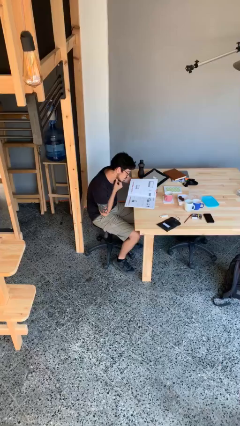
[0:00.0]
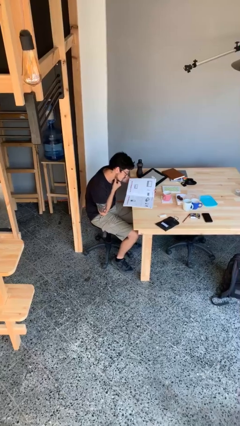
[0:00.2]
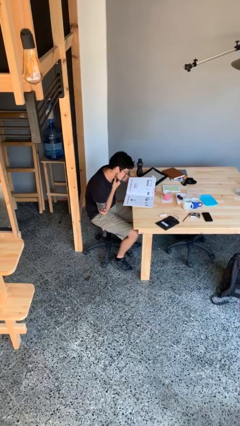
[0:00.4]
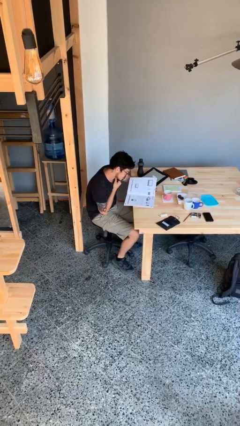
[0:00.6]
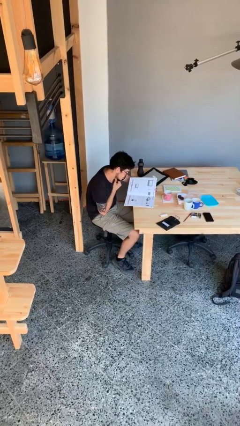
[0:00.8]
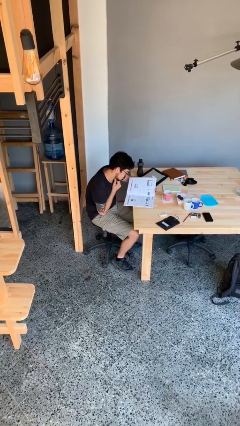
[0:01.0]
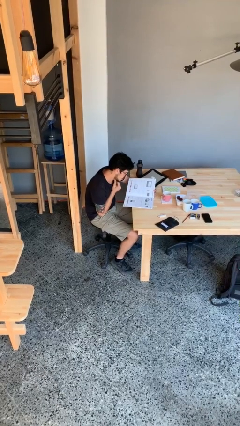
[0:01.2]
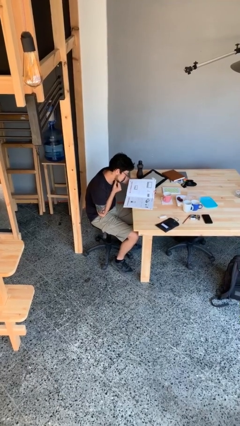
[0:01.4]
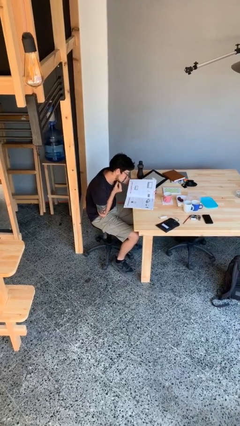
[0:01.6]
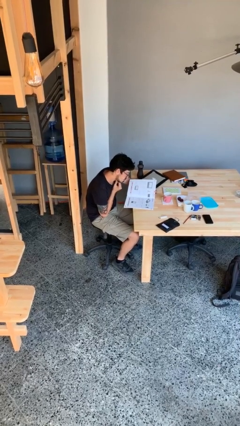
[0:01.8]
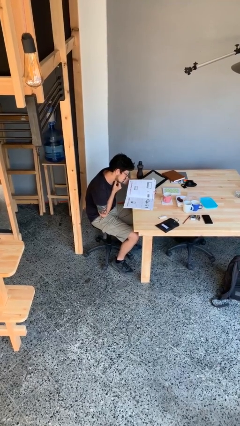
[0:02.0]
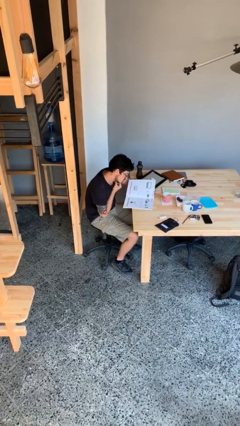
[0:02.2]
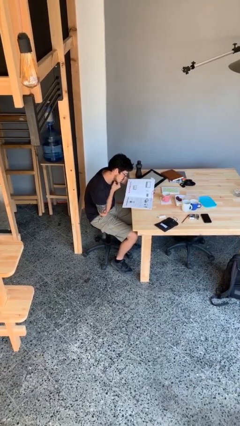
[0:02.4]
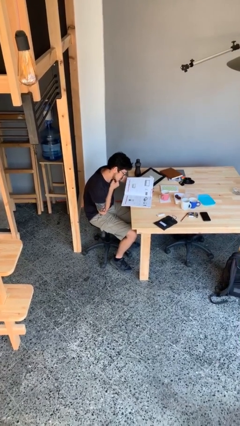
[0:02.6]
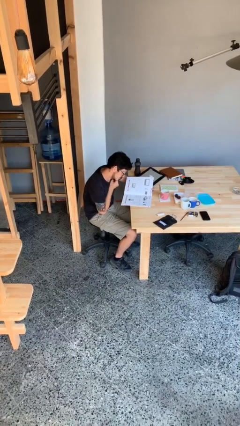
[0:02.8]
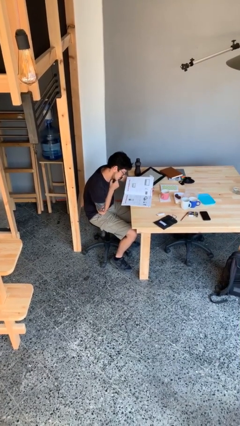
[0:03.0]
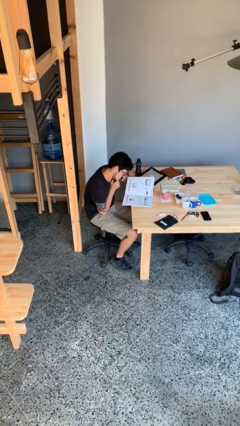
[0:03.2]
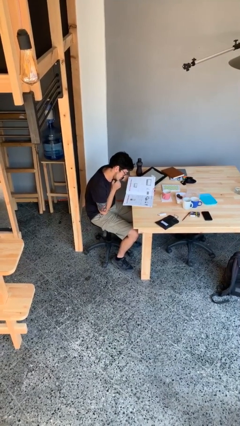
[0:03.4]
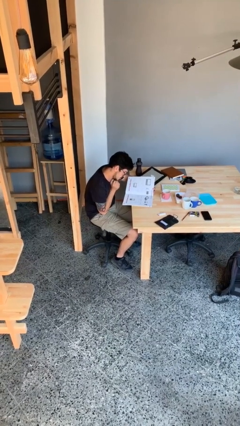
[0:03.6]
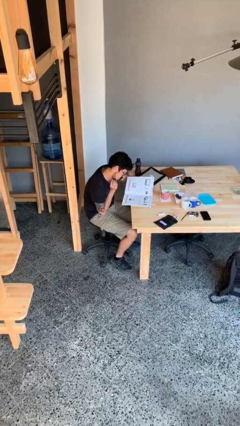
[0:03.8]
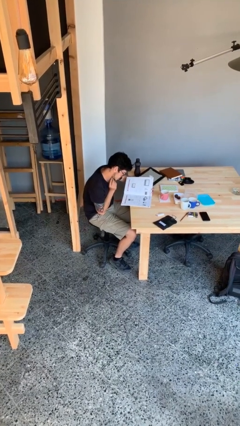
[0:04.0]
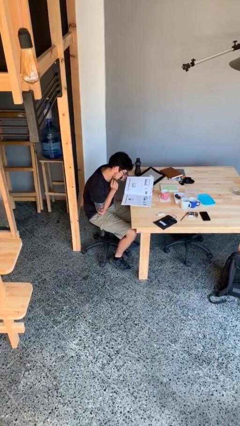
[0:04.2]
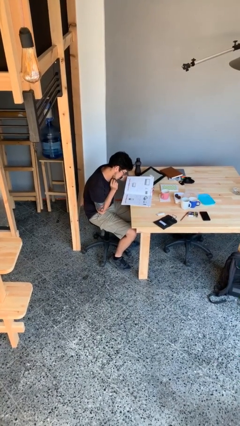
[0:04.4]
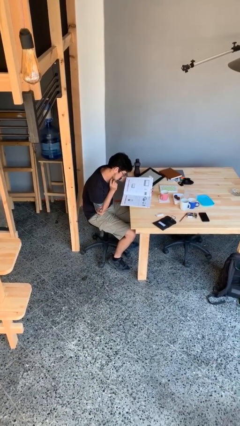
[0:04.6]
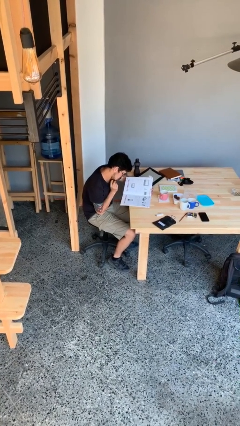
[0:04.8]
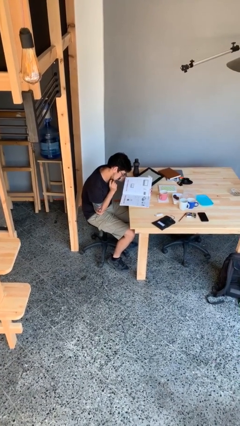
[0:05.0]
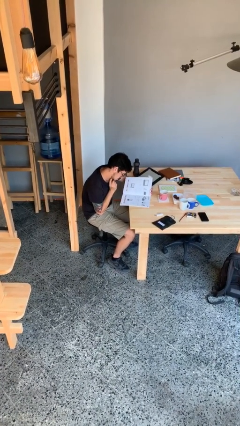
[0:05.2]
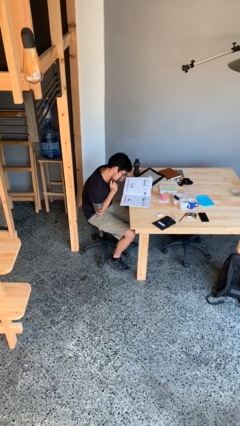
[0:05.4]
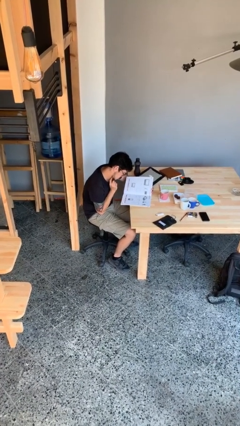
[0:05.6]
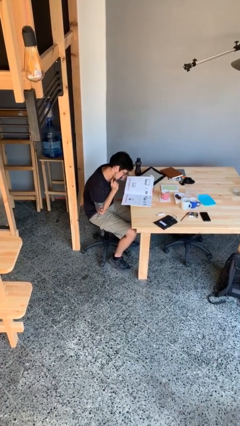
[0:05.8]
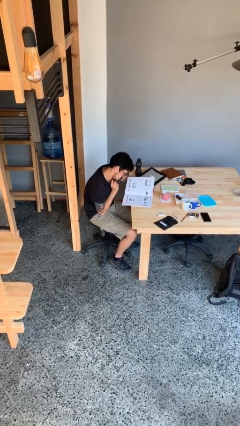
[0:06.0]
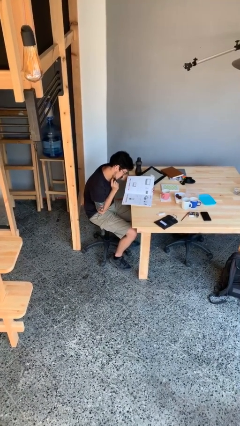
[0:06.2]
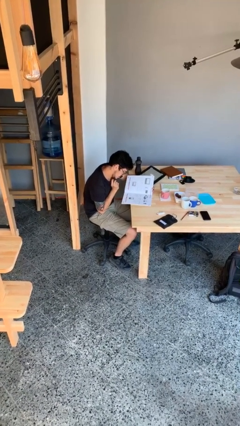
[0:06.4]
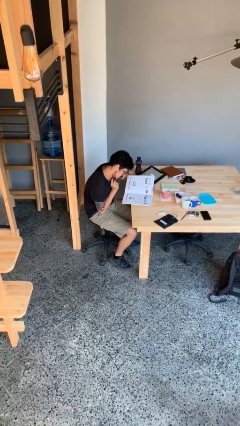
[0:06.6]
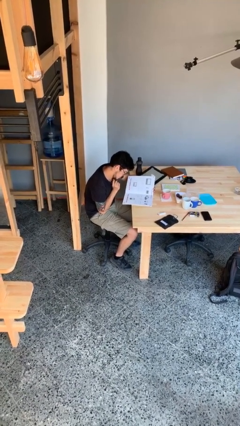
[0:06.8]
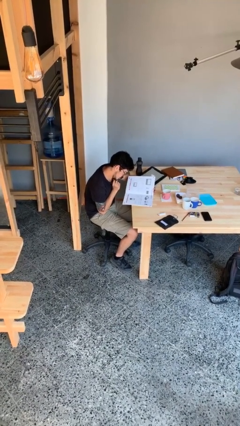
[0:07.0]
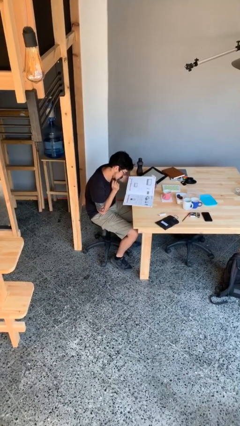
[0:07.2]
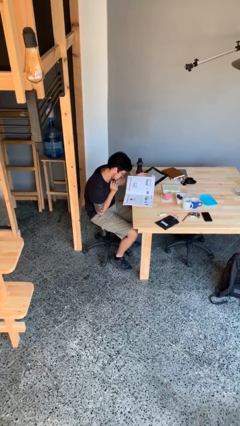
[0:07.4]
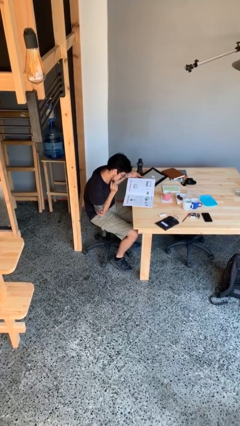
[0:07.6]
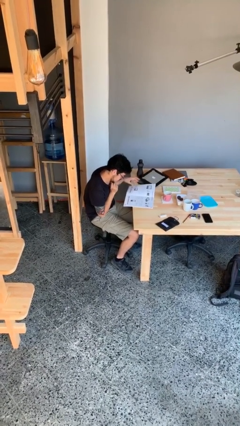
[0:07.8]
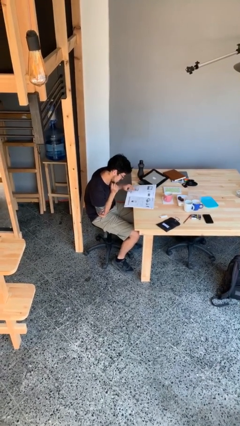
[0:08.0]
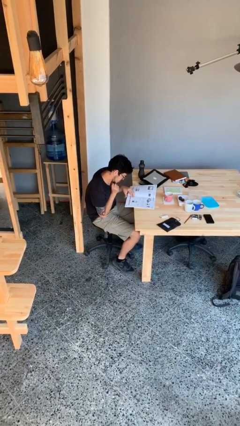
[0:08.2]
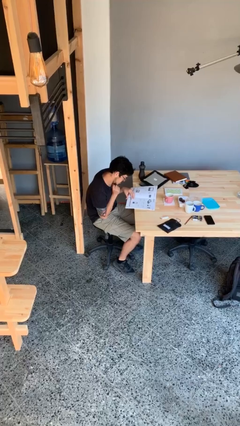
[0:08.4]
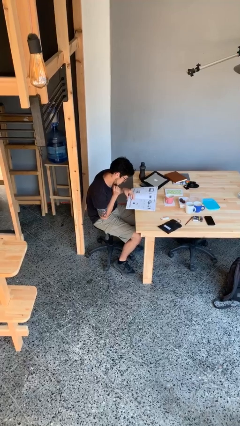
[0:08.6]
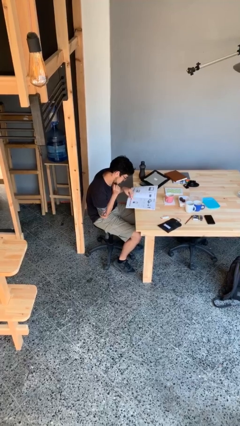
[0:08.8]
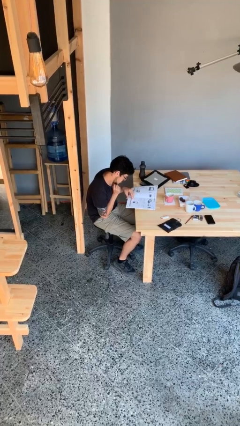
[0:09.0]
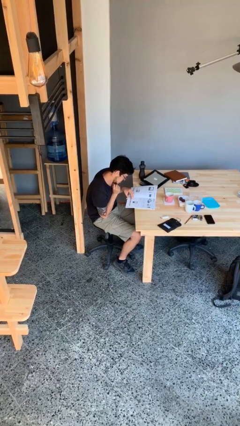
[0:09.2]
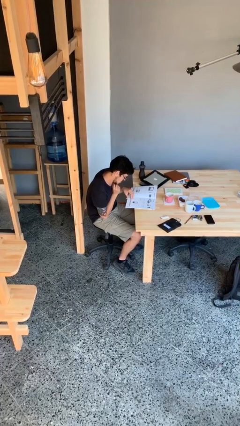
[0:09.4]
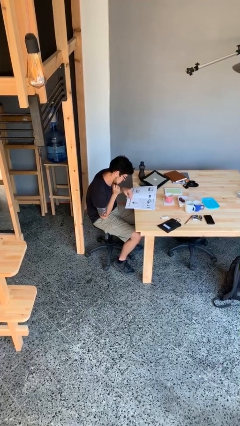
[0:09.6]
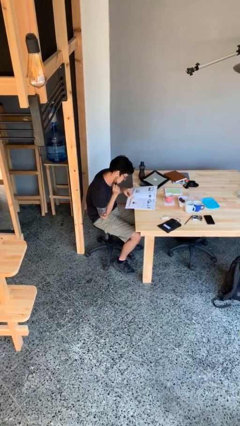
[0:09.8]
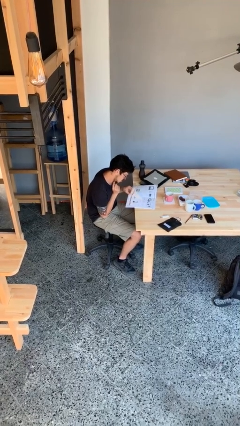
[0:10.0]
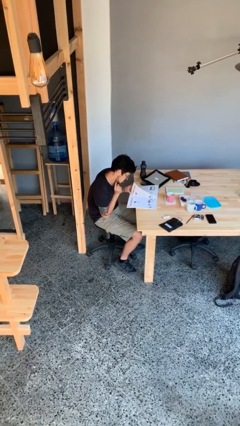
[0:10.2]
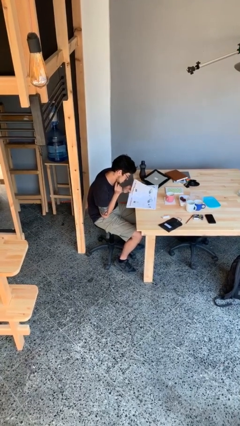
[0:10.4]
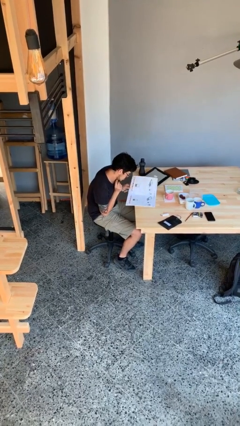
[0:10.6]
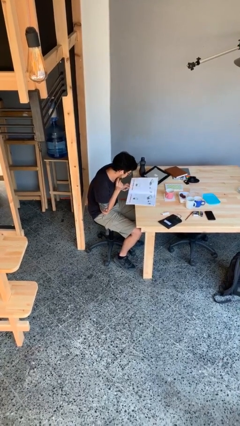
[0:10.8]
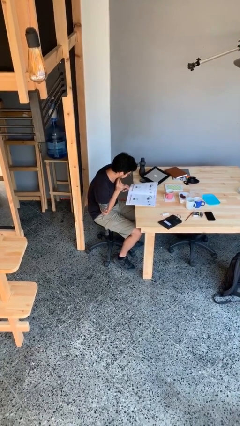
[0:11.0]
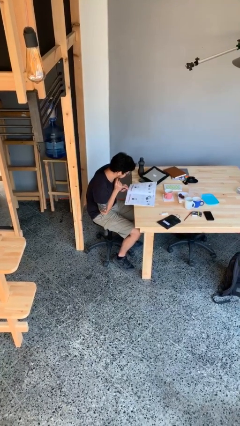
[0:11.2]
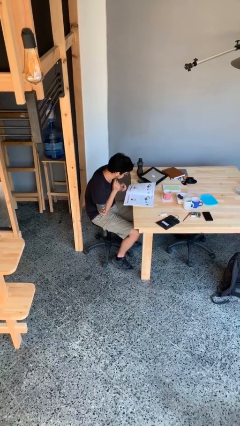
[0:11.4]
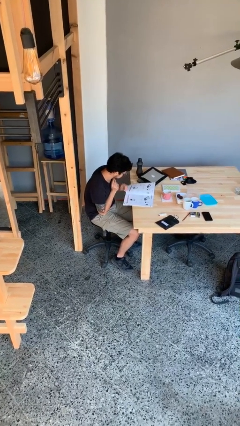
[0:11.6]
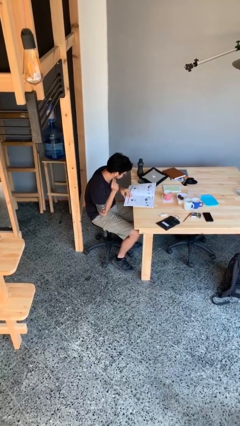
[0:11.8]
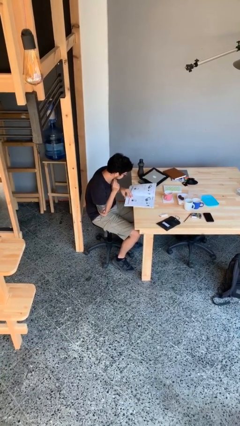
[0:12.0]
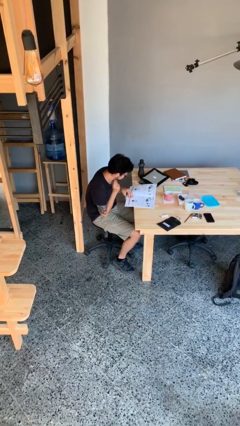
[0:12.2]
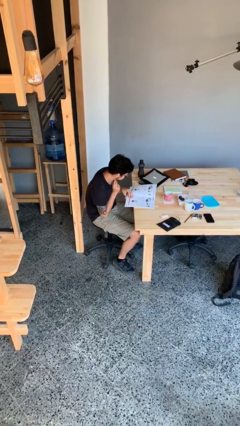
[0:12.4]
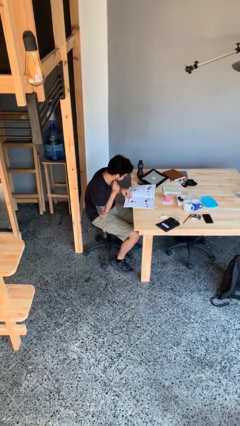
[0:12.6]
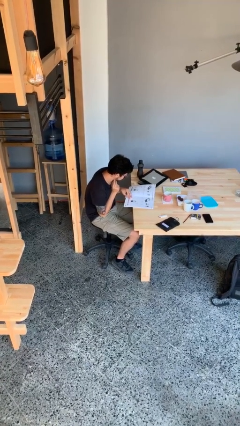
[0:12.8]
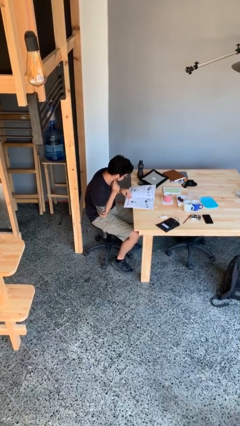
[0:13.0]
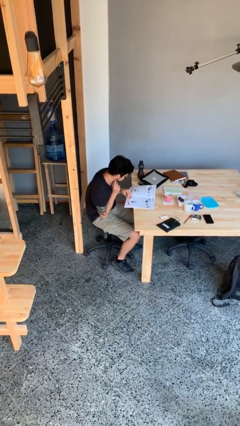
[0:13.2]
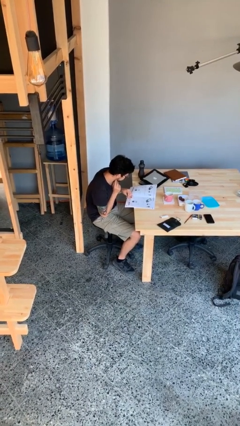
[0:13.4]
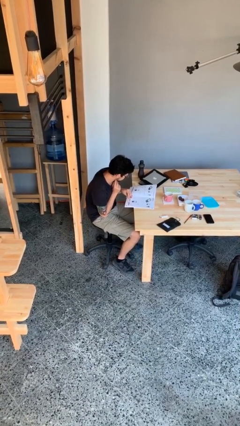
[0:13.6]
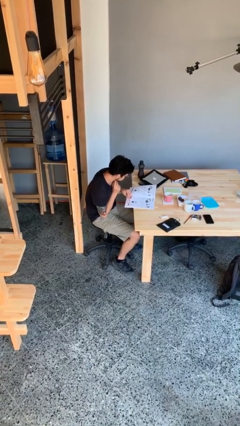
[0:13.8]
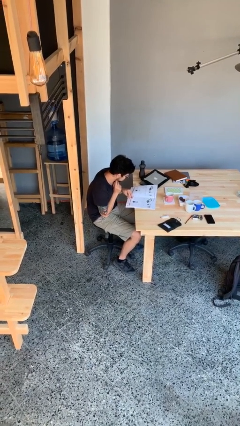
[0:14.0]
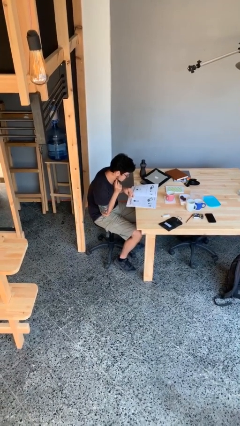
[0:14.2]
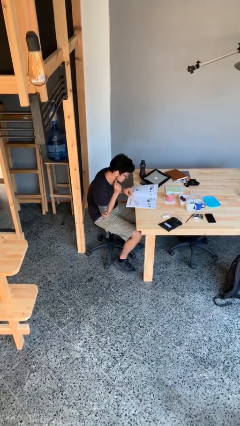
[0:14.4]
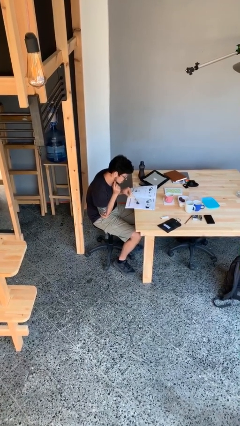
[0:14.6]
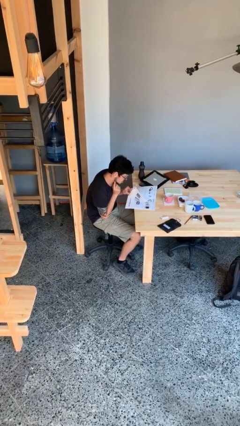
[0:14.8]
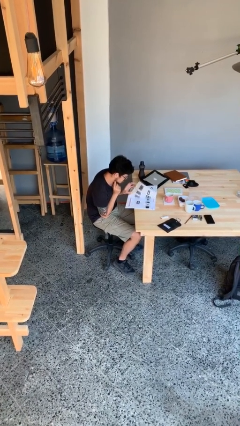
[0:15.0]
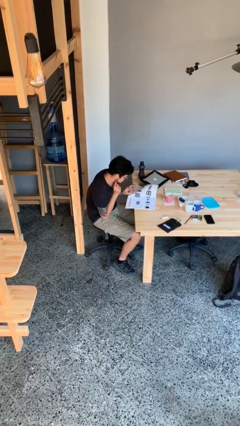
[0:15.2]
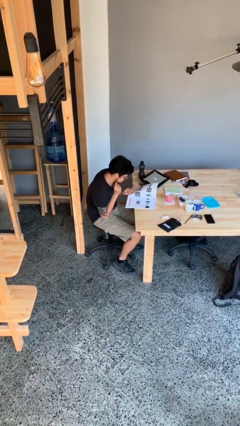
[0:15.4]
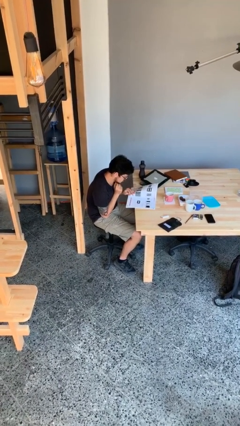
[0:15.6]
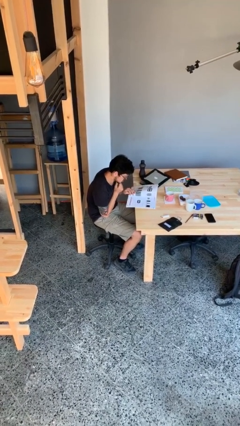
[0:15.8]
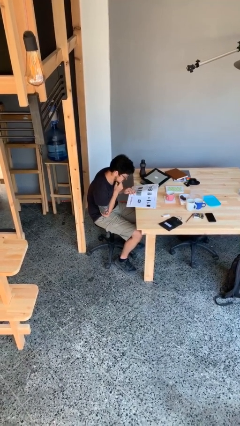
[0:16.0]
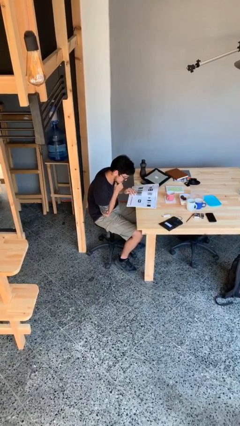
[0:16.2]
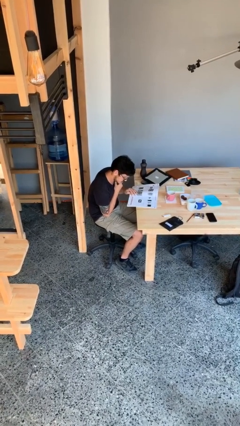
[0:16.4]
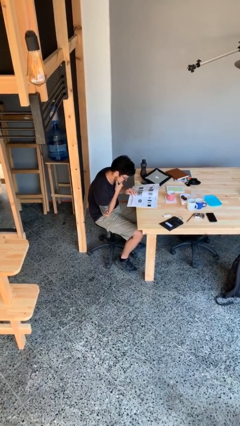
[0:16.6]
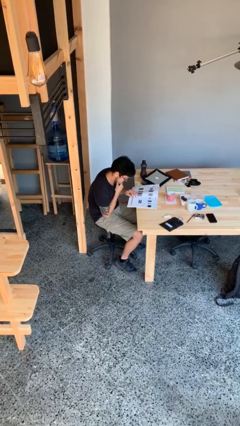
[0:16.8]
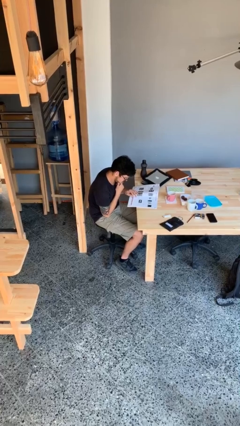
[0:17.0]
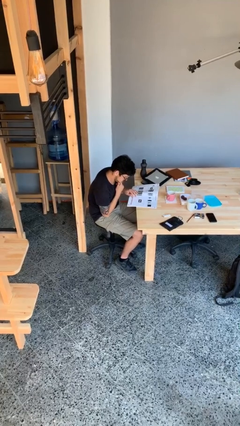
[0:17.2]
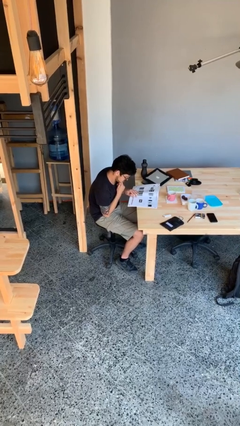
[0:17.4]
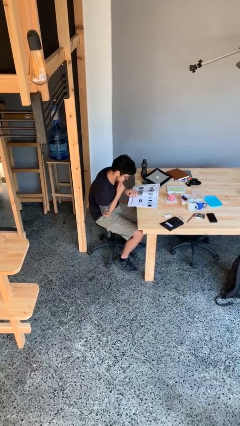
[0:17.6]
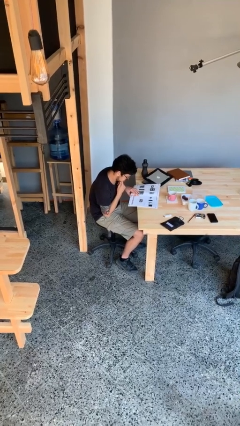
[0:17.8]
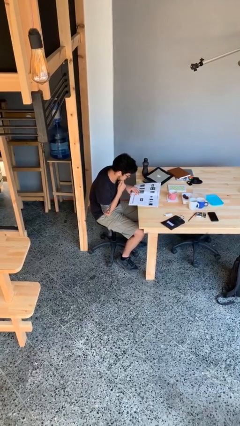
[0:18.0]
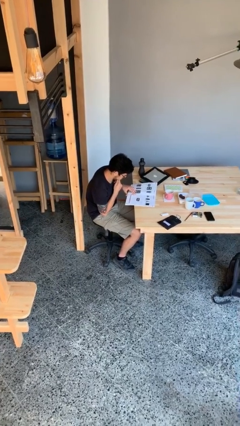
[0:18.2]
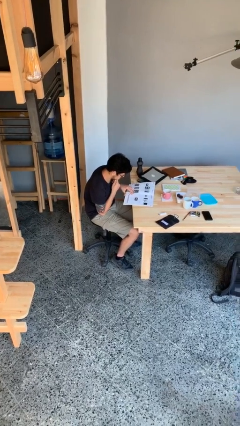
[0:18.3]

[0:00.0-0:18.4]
person reads document
